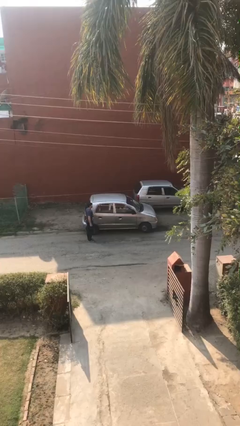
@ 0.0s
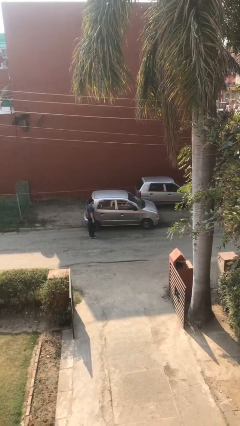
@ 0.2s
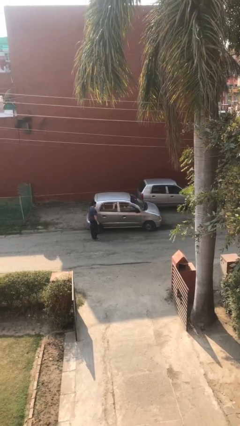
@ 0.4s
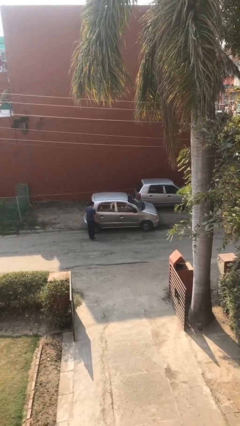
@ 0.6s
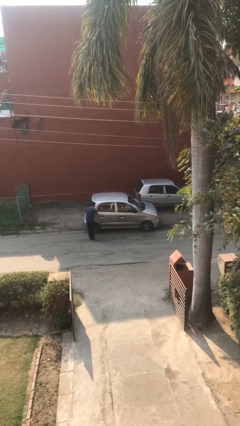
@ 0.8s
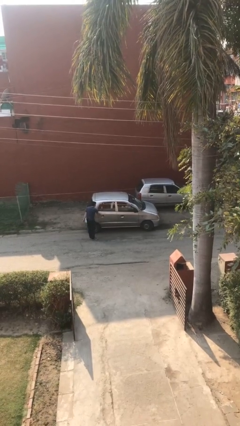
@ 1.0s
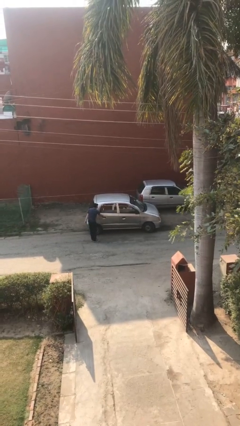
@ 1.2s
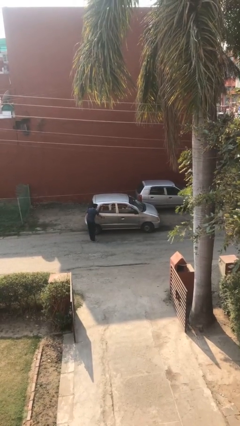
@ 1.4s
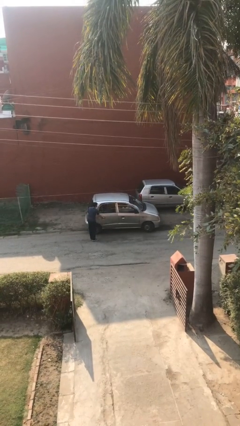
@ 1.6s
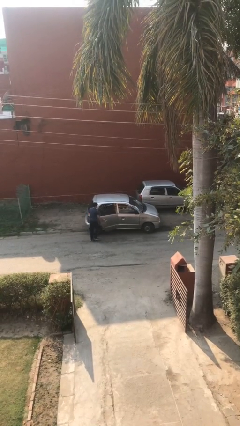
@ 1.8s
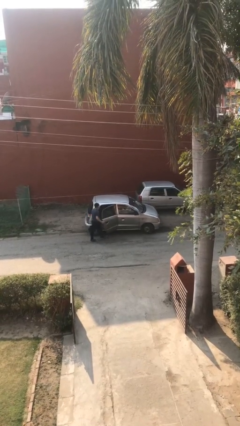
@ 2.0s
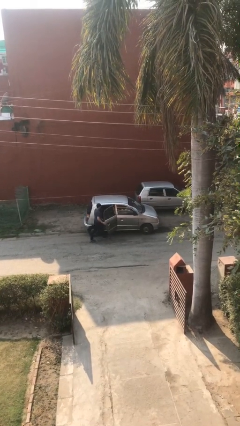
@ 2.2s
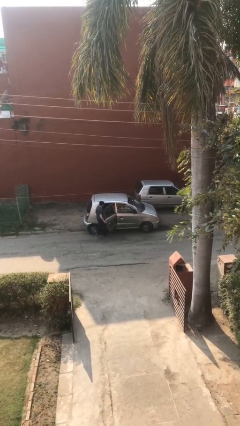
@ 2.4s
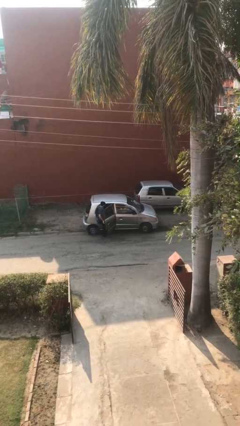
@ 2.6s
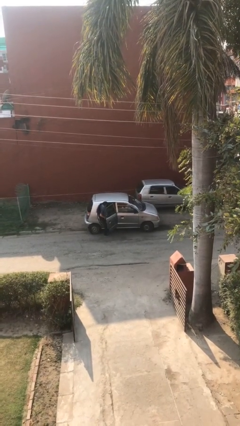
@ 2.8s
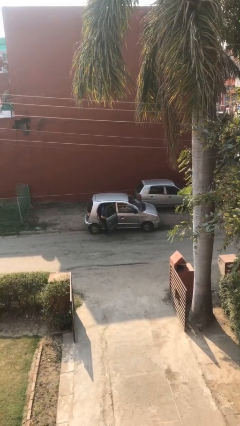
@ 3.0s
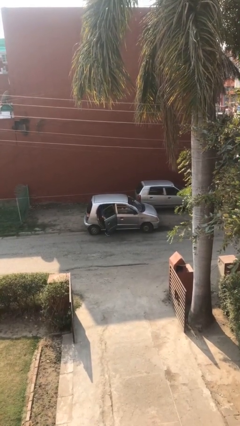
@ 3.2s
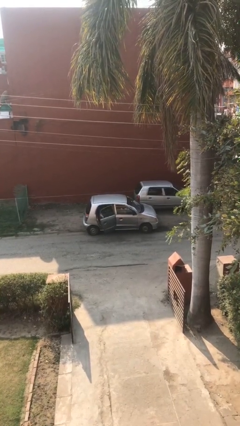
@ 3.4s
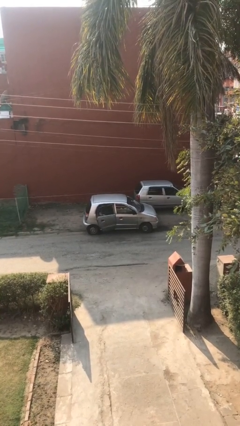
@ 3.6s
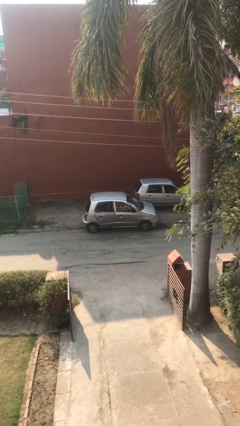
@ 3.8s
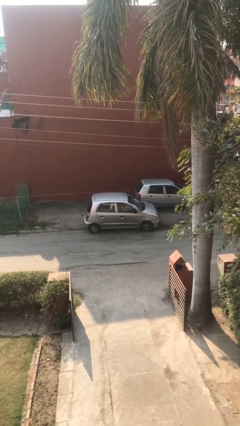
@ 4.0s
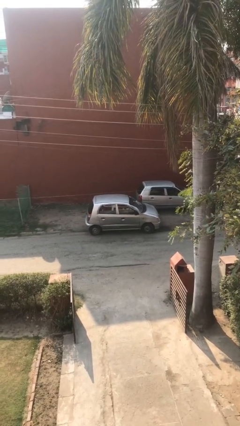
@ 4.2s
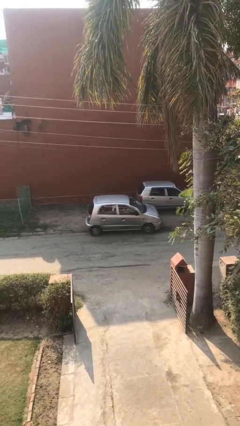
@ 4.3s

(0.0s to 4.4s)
car picks up person

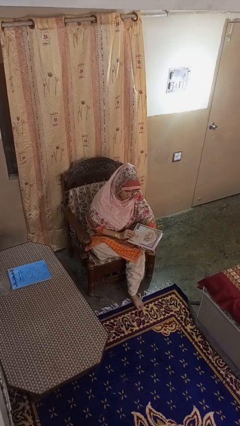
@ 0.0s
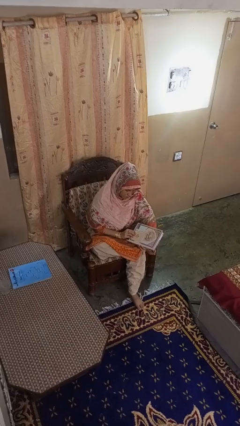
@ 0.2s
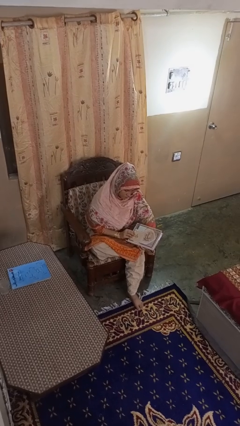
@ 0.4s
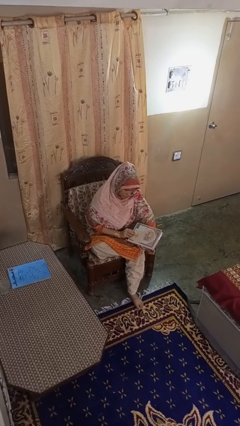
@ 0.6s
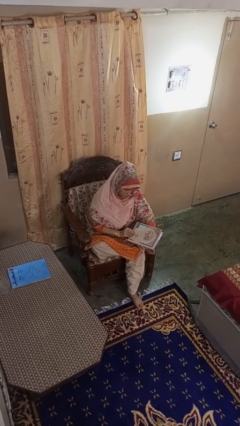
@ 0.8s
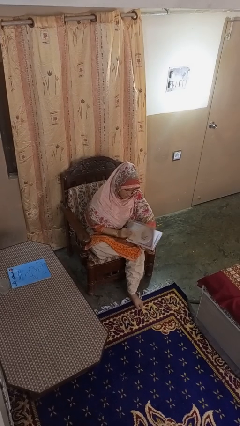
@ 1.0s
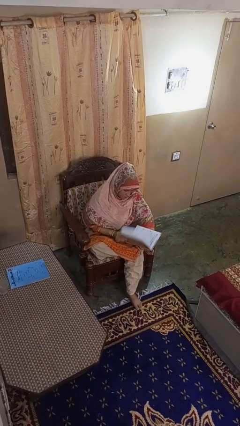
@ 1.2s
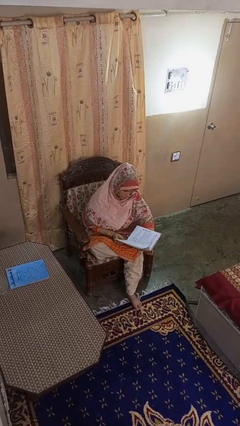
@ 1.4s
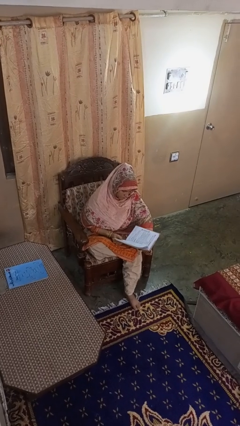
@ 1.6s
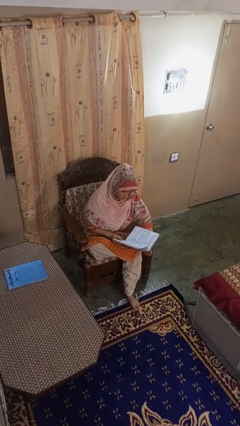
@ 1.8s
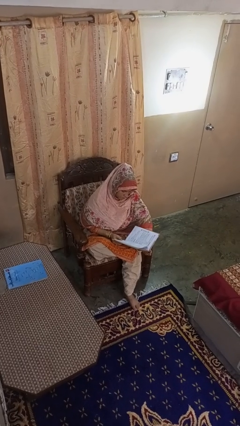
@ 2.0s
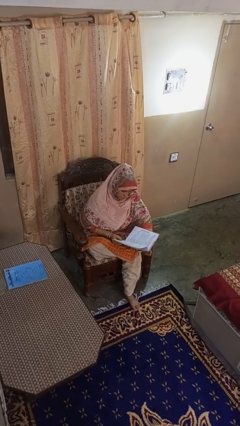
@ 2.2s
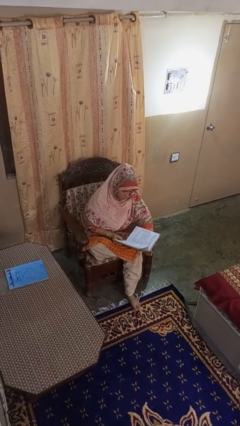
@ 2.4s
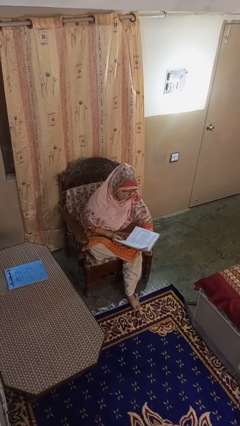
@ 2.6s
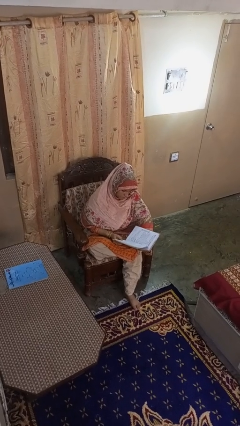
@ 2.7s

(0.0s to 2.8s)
person reads book

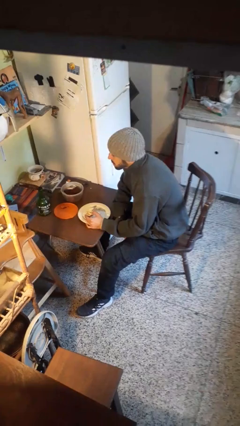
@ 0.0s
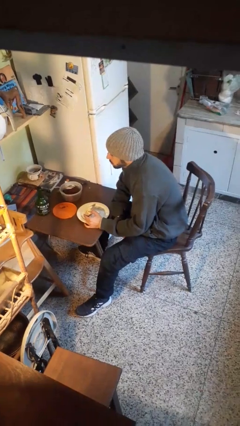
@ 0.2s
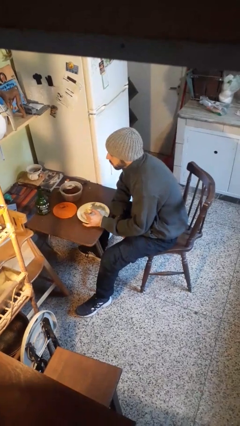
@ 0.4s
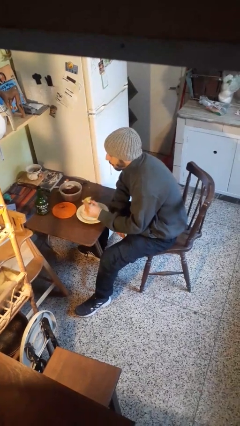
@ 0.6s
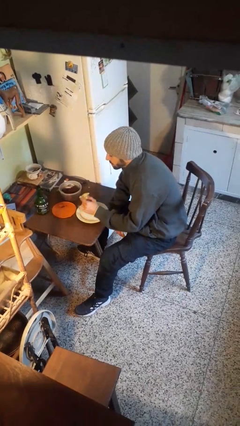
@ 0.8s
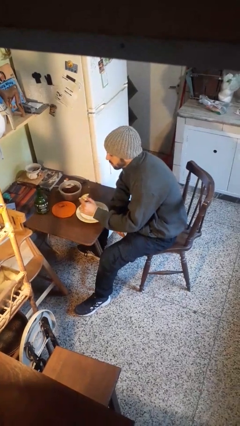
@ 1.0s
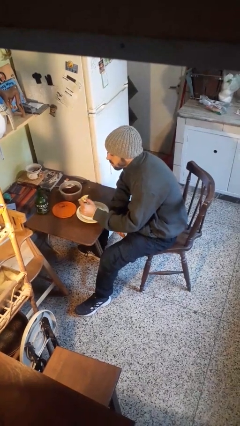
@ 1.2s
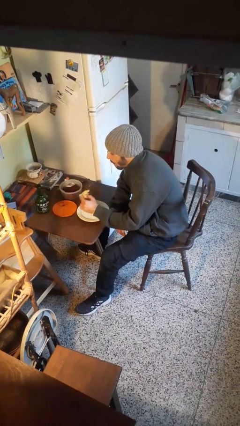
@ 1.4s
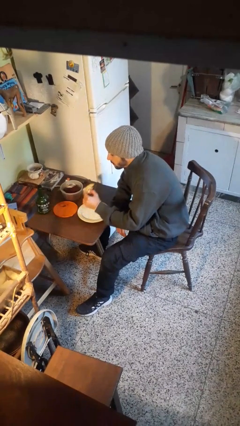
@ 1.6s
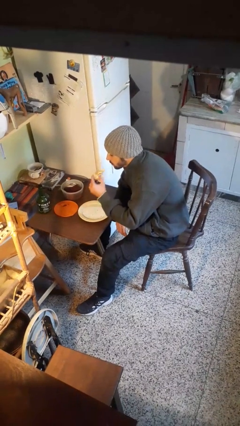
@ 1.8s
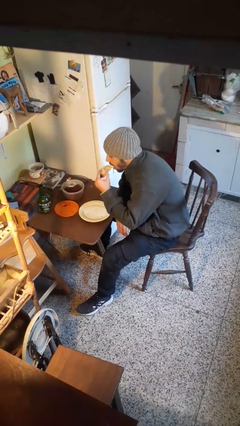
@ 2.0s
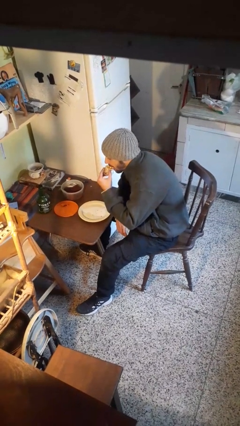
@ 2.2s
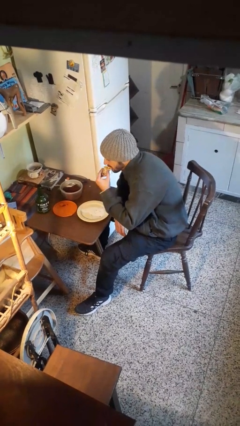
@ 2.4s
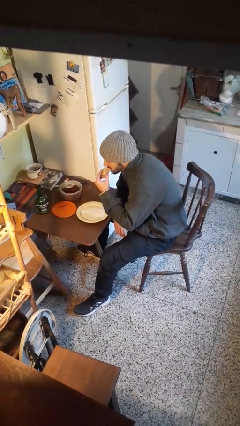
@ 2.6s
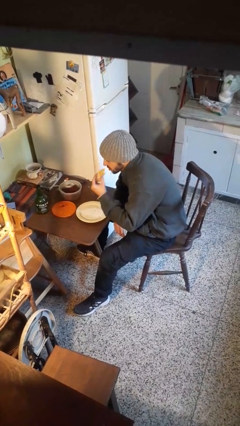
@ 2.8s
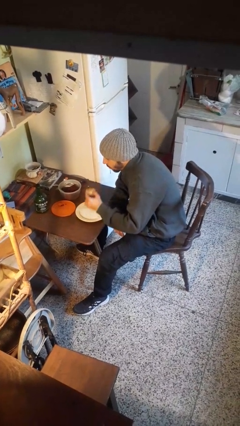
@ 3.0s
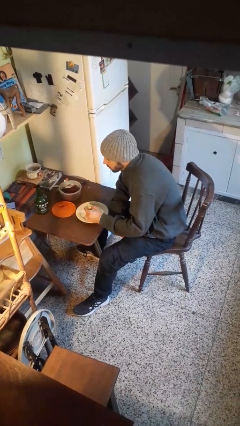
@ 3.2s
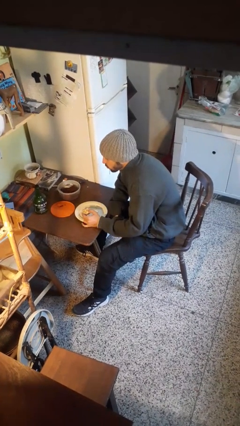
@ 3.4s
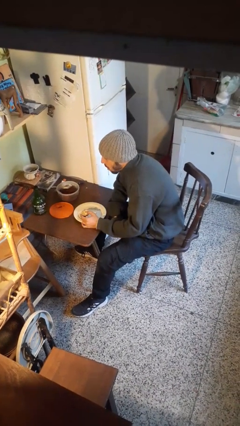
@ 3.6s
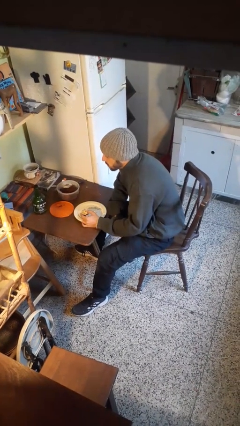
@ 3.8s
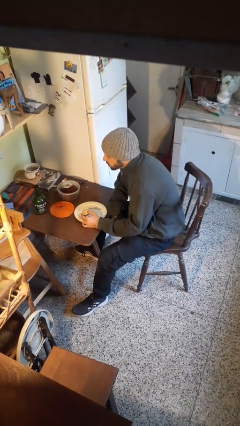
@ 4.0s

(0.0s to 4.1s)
person eats with hands

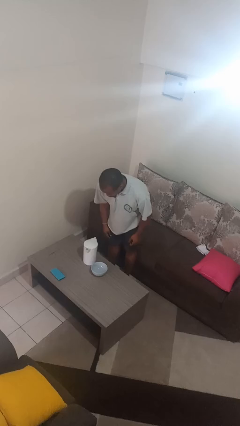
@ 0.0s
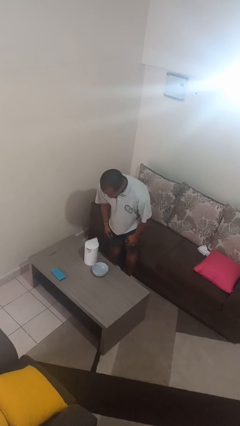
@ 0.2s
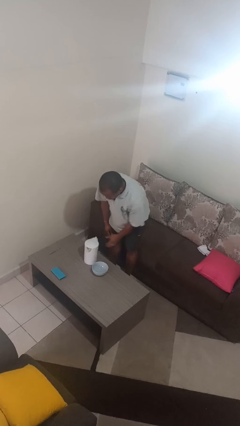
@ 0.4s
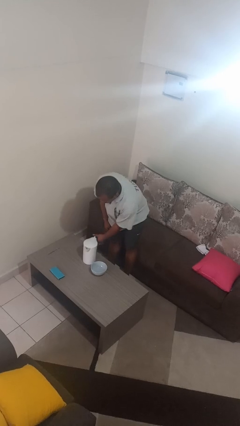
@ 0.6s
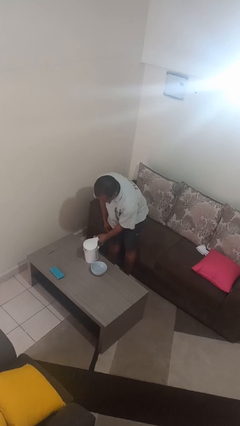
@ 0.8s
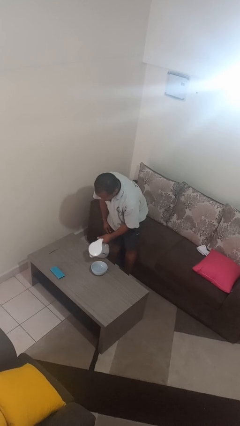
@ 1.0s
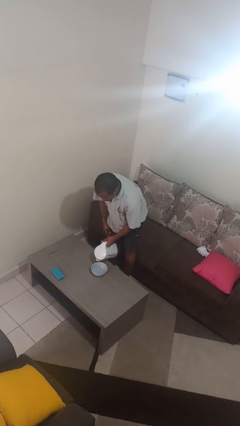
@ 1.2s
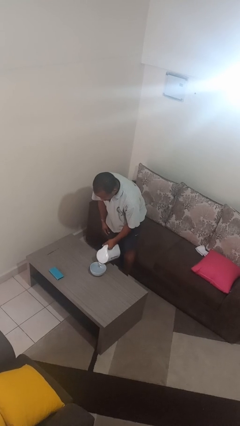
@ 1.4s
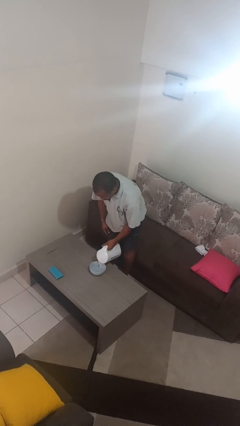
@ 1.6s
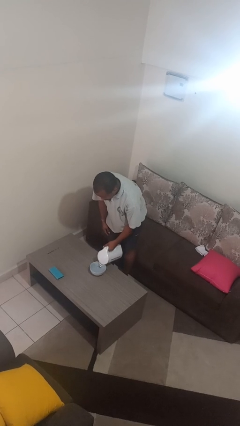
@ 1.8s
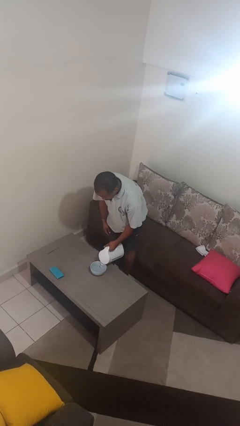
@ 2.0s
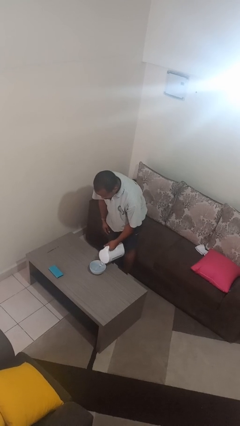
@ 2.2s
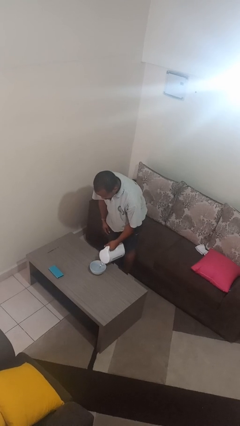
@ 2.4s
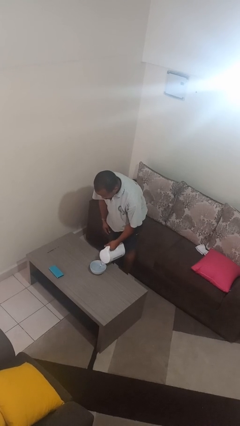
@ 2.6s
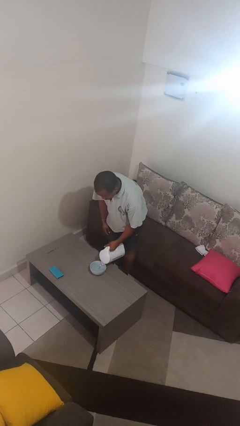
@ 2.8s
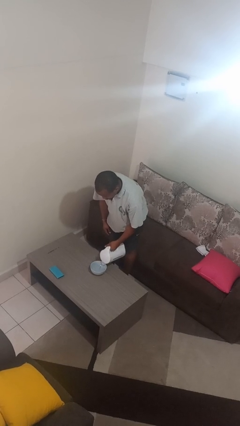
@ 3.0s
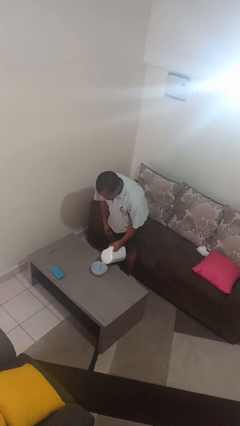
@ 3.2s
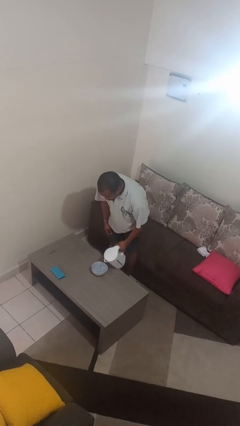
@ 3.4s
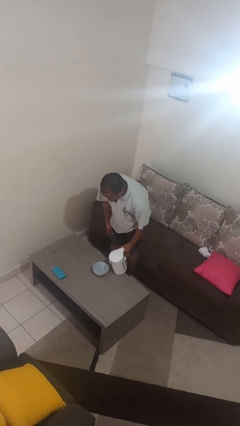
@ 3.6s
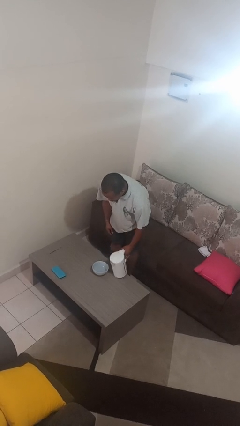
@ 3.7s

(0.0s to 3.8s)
person pours into bowl

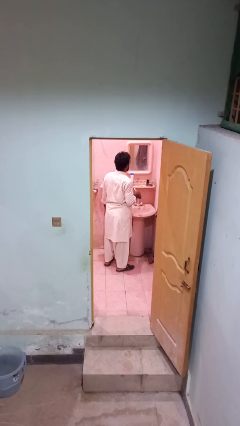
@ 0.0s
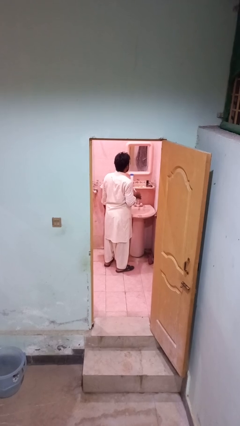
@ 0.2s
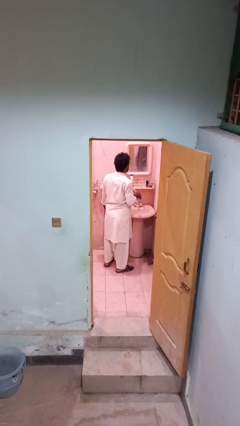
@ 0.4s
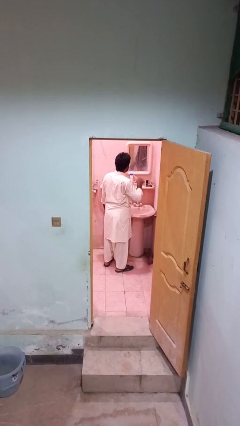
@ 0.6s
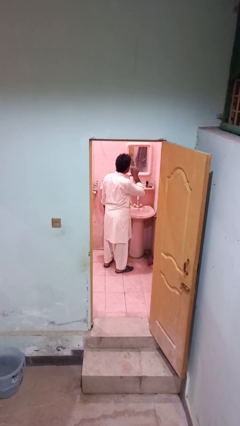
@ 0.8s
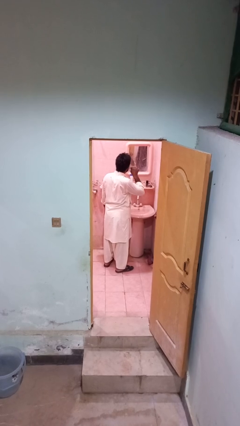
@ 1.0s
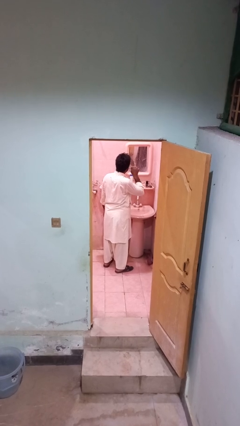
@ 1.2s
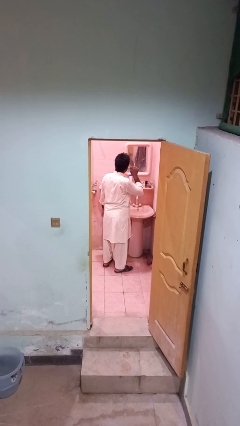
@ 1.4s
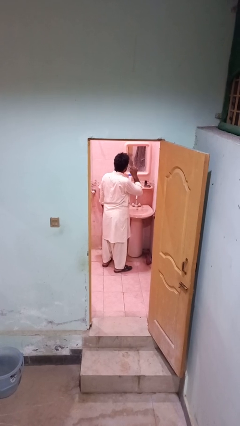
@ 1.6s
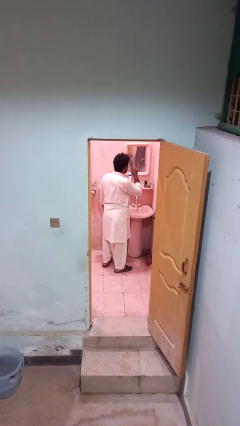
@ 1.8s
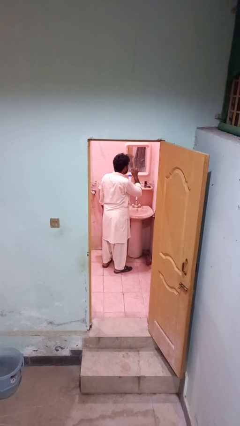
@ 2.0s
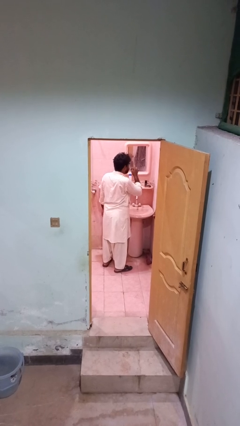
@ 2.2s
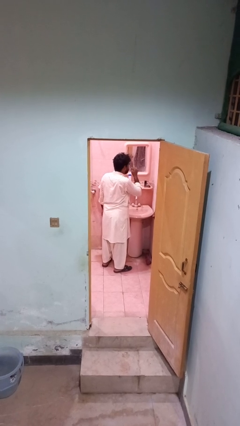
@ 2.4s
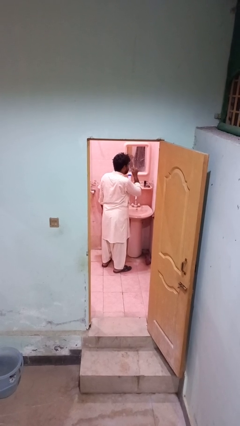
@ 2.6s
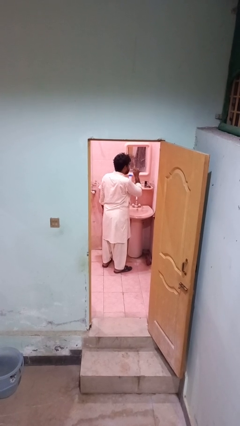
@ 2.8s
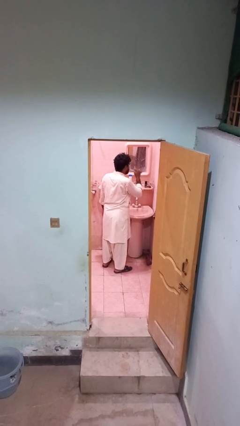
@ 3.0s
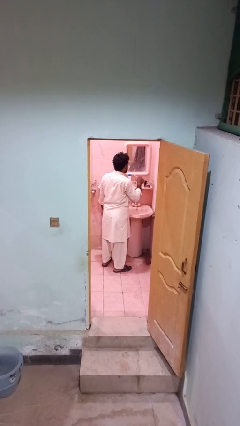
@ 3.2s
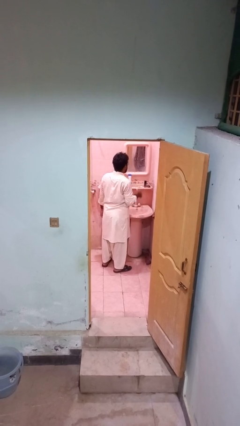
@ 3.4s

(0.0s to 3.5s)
person brushes teeth
